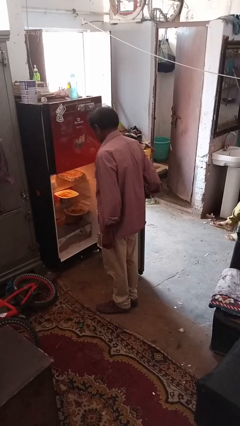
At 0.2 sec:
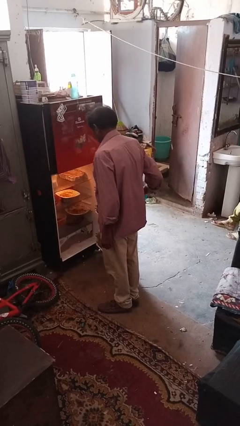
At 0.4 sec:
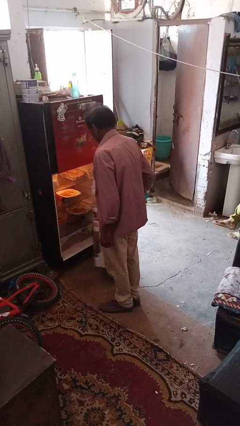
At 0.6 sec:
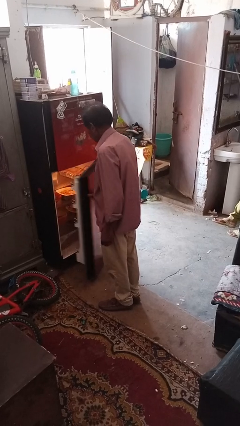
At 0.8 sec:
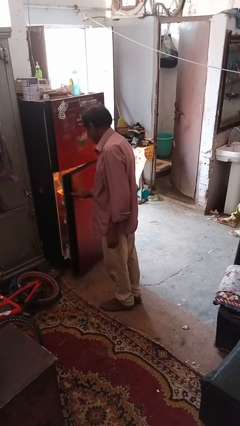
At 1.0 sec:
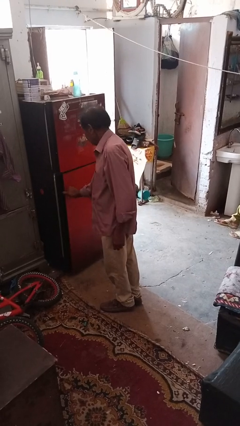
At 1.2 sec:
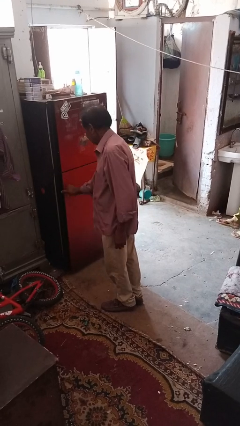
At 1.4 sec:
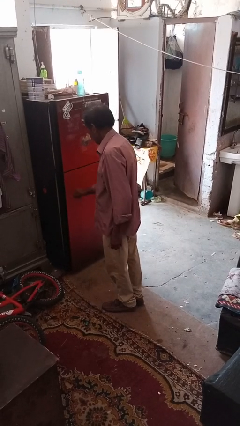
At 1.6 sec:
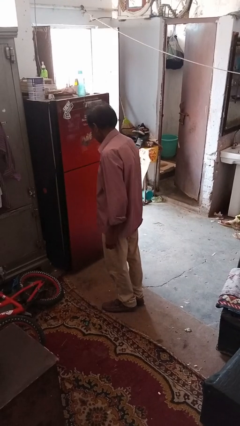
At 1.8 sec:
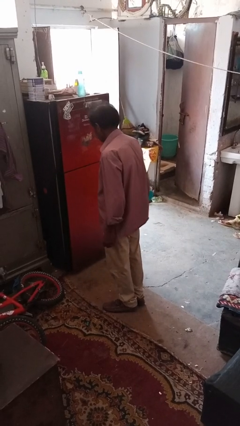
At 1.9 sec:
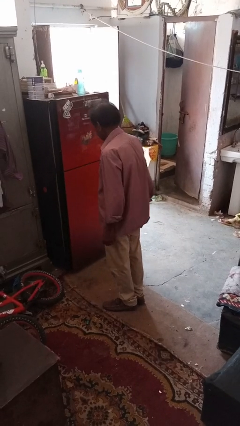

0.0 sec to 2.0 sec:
person closes refrigerator

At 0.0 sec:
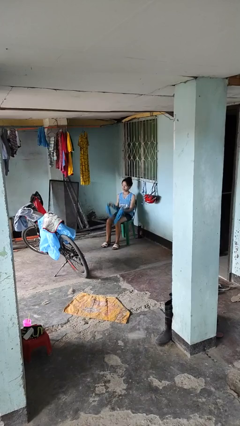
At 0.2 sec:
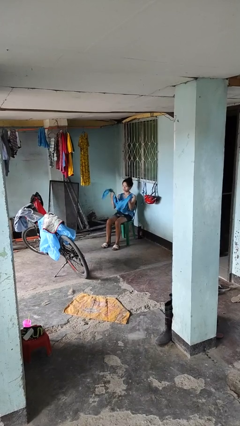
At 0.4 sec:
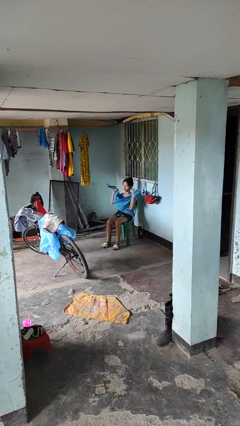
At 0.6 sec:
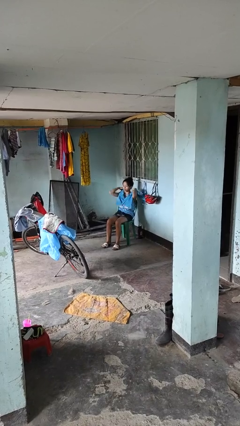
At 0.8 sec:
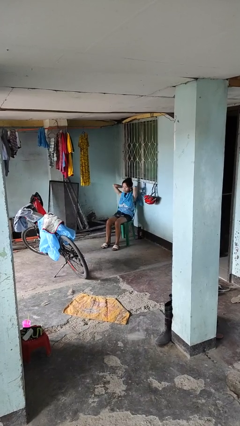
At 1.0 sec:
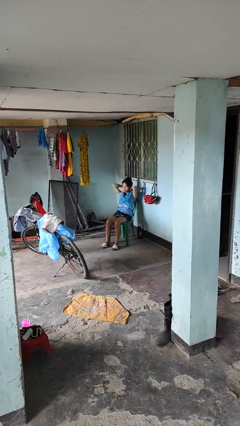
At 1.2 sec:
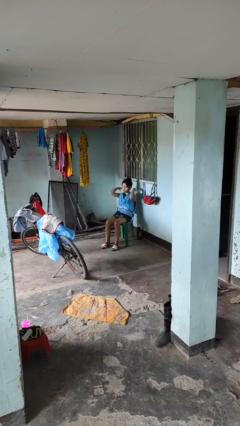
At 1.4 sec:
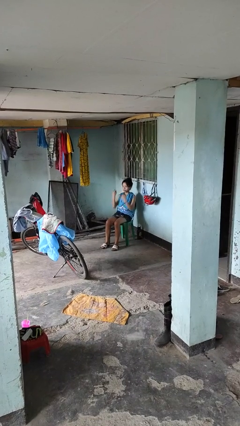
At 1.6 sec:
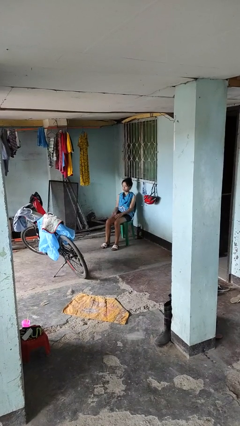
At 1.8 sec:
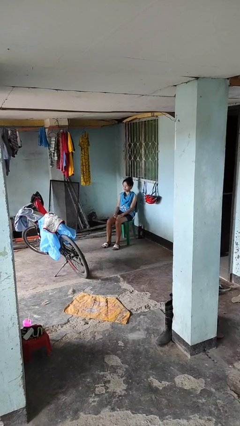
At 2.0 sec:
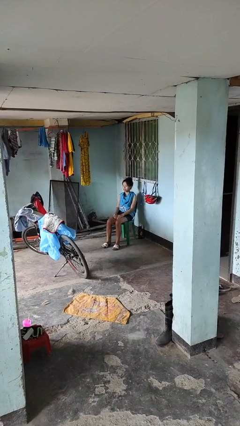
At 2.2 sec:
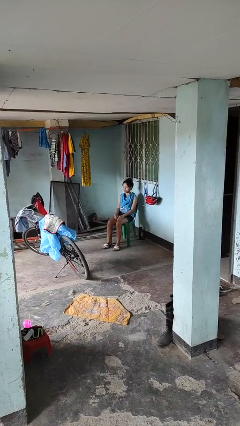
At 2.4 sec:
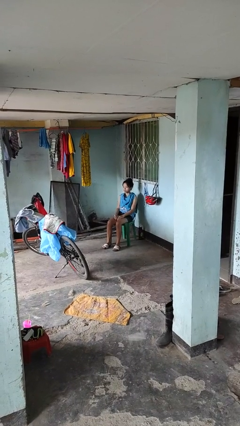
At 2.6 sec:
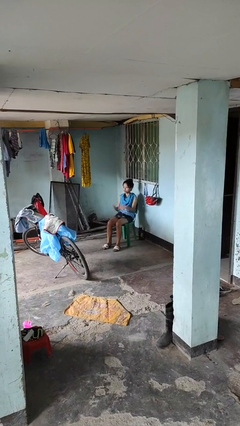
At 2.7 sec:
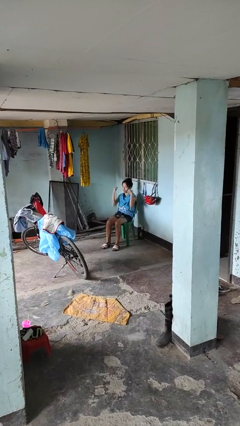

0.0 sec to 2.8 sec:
person puts on scarf

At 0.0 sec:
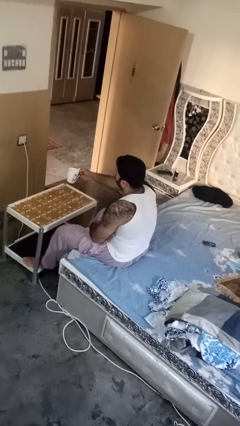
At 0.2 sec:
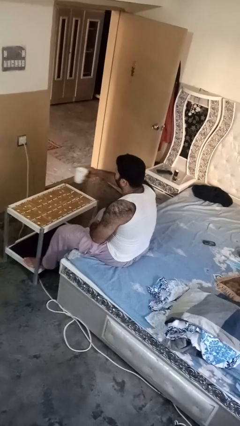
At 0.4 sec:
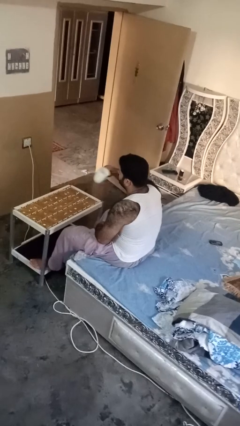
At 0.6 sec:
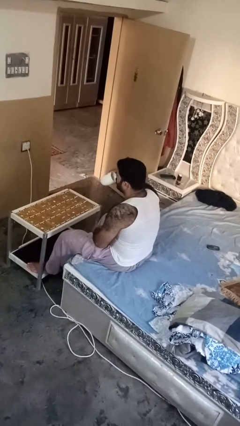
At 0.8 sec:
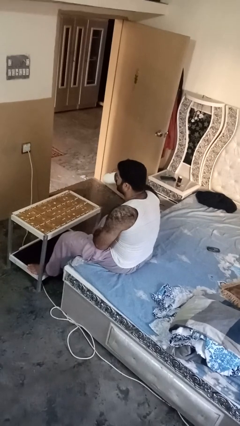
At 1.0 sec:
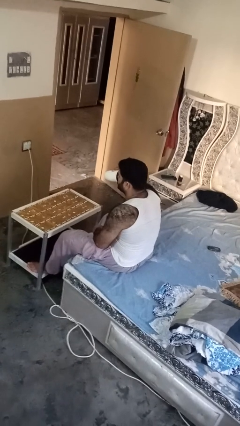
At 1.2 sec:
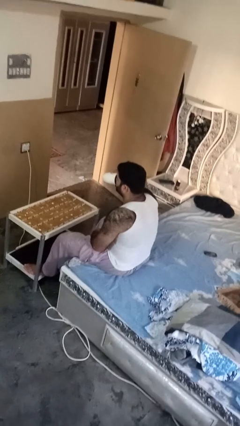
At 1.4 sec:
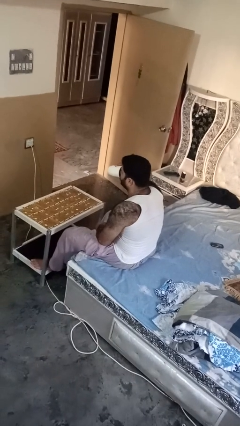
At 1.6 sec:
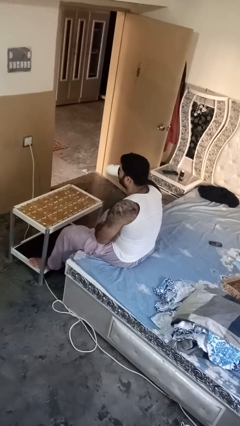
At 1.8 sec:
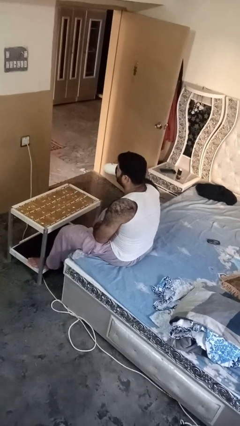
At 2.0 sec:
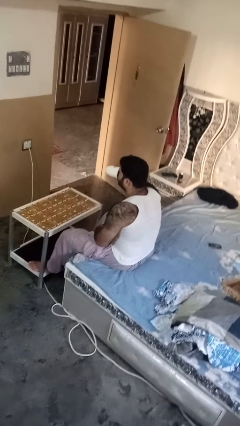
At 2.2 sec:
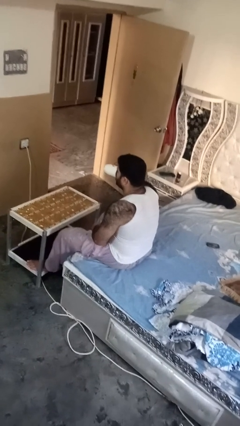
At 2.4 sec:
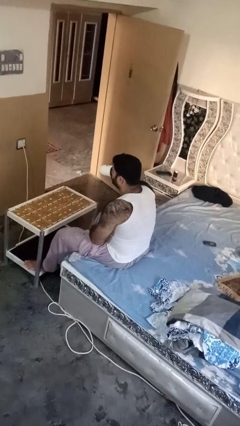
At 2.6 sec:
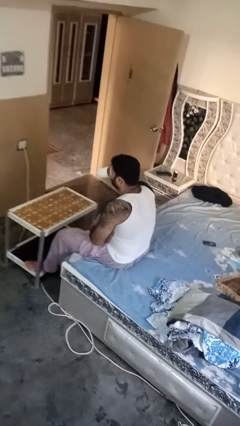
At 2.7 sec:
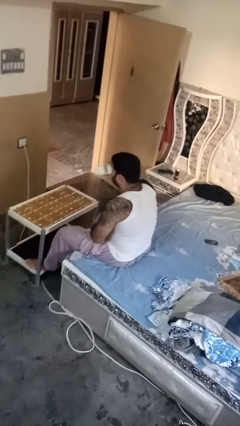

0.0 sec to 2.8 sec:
person drinks from mug

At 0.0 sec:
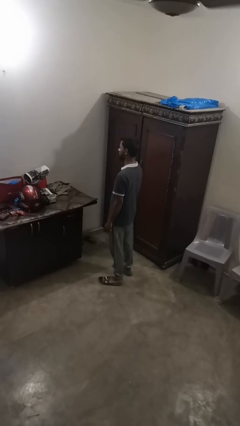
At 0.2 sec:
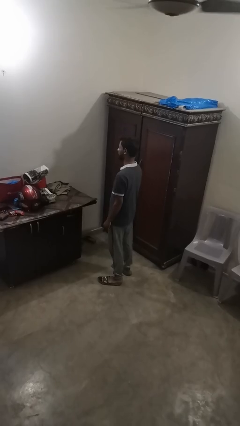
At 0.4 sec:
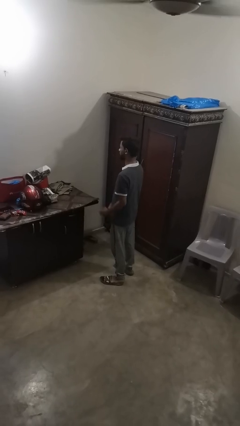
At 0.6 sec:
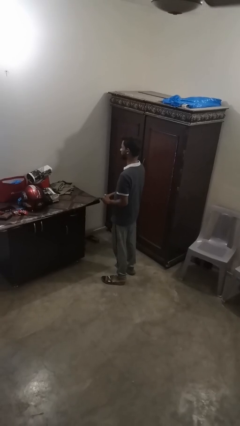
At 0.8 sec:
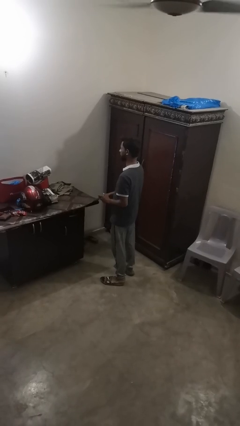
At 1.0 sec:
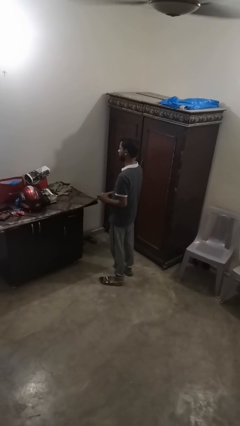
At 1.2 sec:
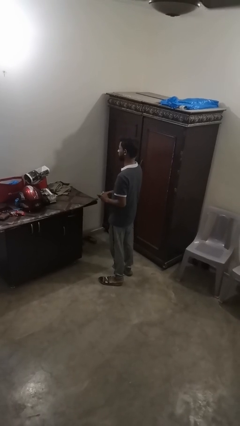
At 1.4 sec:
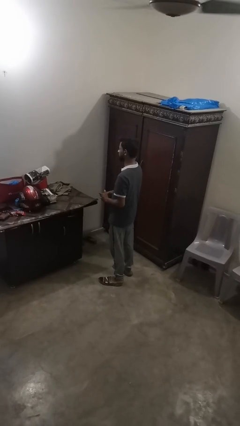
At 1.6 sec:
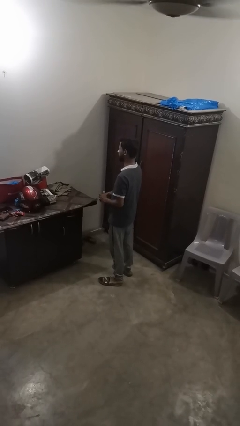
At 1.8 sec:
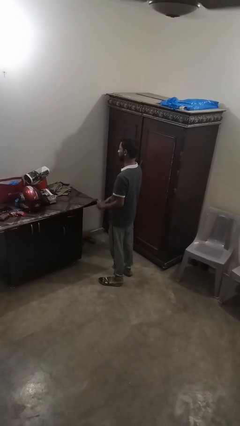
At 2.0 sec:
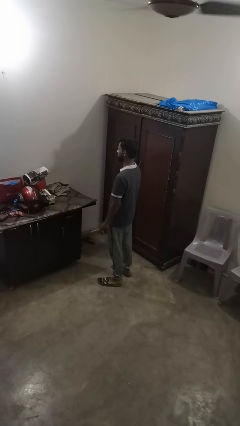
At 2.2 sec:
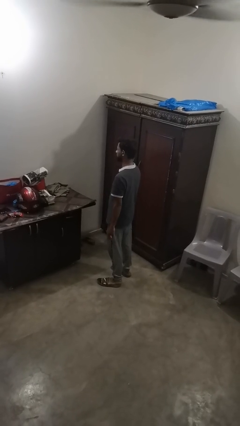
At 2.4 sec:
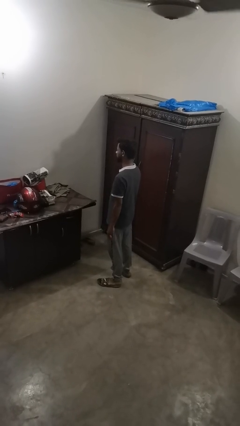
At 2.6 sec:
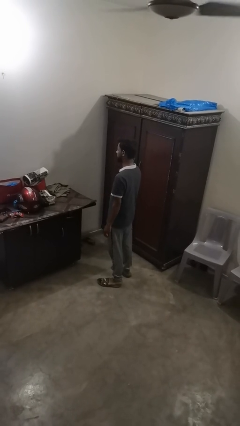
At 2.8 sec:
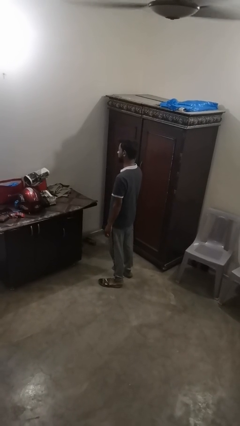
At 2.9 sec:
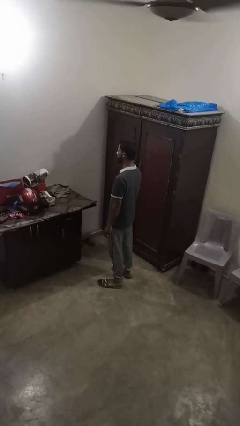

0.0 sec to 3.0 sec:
person puts on ring

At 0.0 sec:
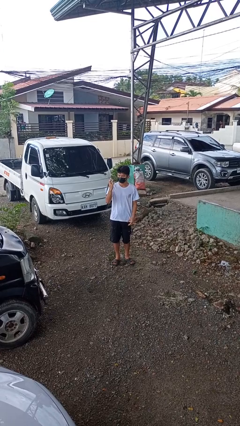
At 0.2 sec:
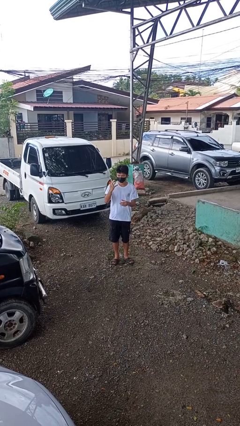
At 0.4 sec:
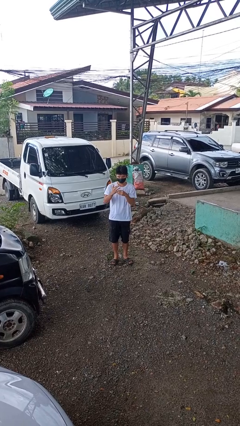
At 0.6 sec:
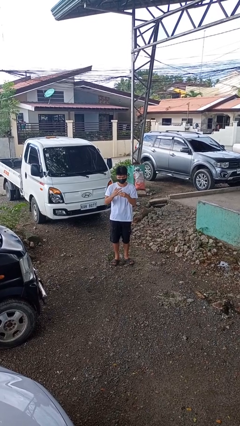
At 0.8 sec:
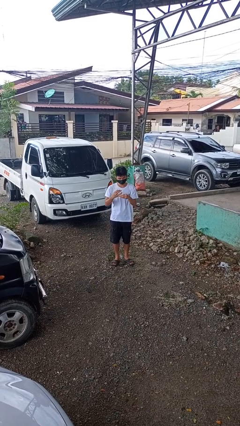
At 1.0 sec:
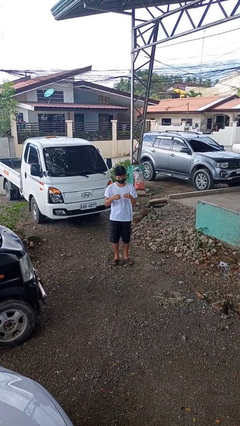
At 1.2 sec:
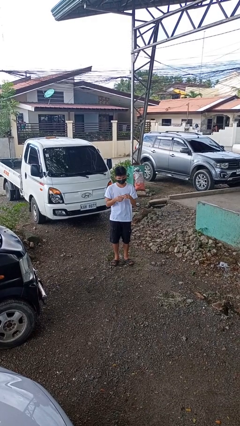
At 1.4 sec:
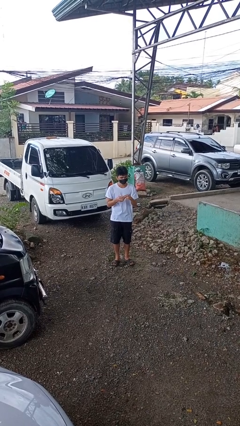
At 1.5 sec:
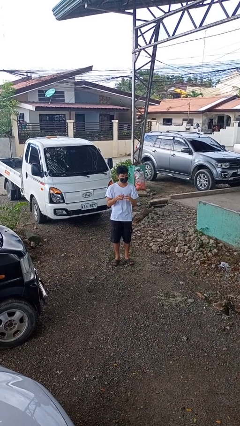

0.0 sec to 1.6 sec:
person takes off ring

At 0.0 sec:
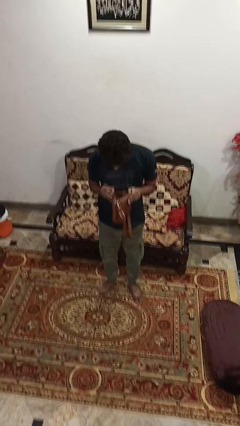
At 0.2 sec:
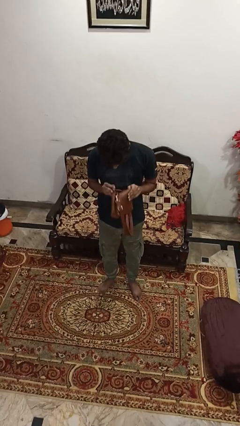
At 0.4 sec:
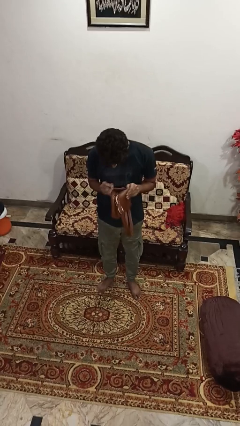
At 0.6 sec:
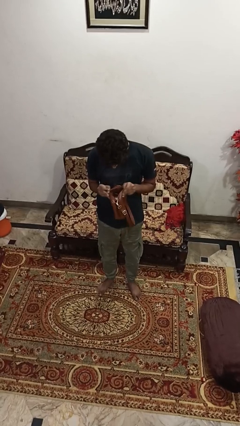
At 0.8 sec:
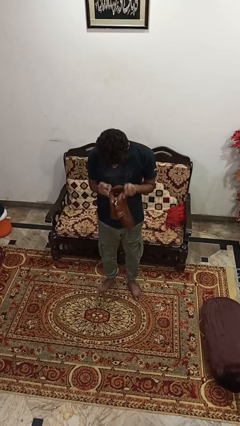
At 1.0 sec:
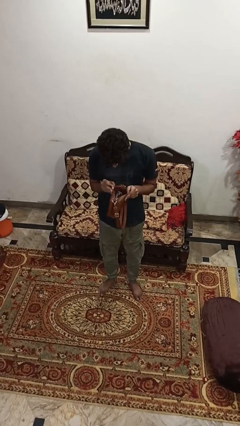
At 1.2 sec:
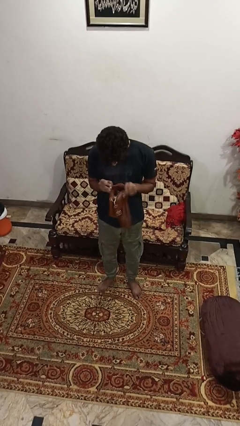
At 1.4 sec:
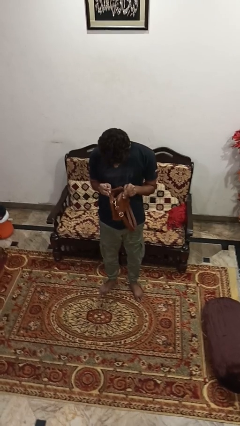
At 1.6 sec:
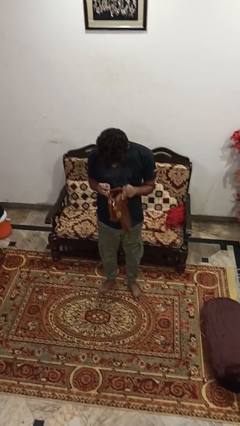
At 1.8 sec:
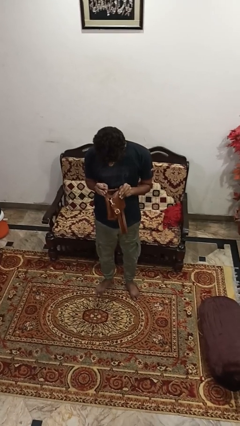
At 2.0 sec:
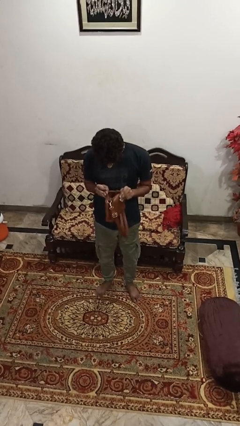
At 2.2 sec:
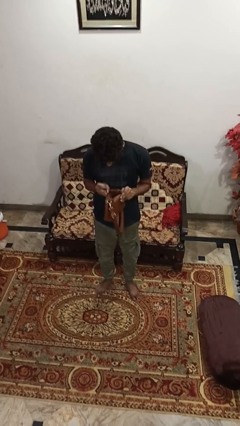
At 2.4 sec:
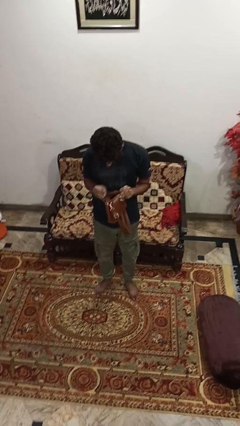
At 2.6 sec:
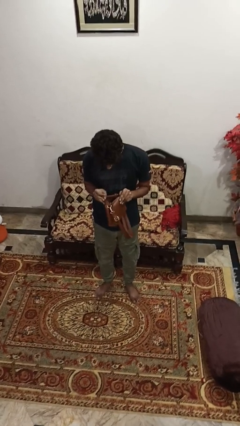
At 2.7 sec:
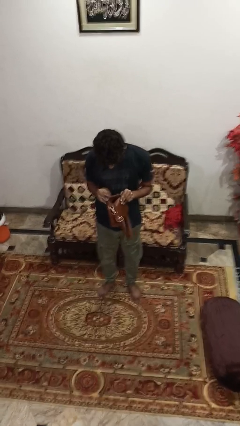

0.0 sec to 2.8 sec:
person searches in purse

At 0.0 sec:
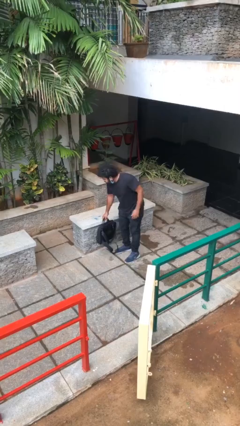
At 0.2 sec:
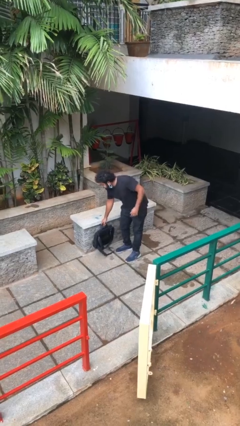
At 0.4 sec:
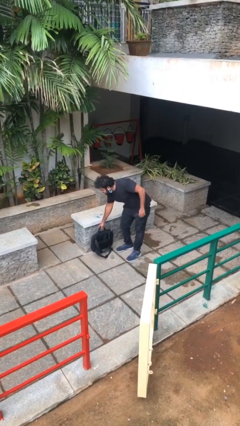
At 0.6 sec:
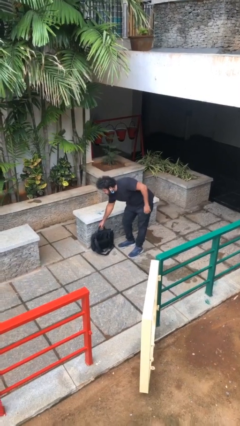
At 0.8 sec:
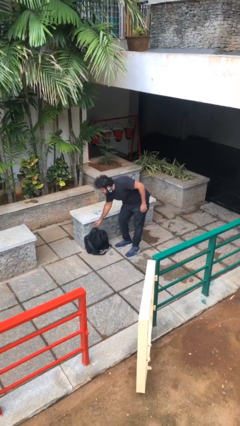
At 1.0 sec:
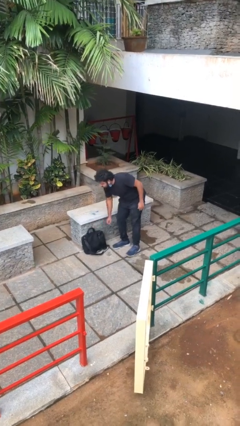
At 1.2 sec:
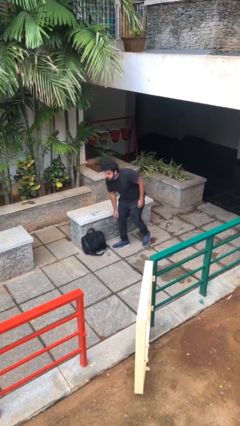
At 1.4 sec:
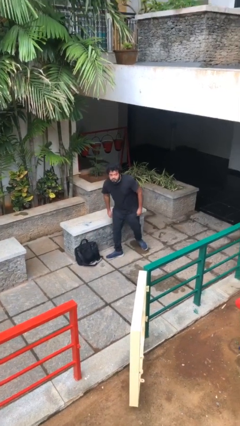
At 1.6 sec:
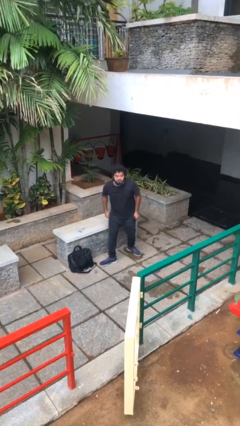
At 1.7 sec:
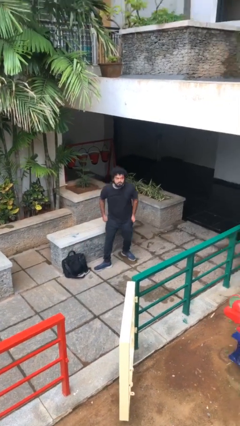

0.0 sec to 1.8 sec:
person puts down object on floor
